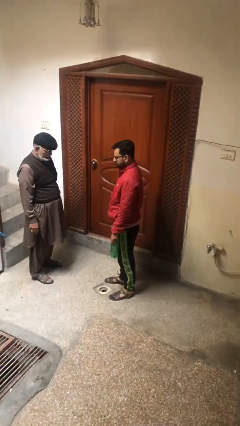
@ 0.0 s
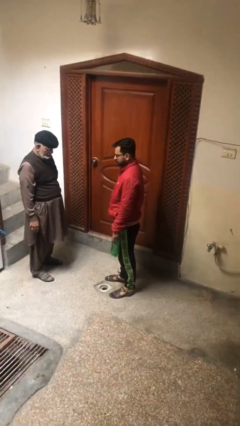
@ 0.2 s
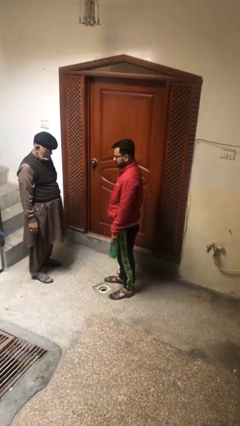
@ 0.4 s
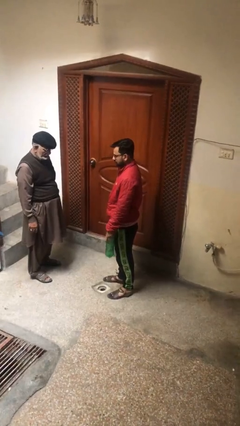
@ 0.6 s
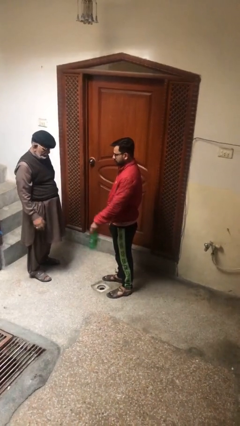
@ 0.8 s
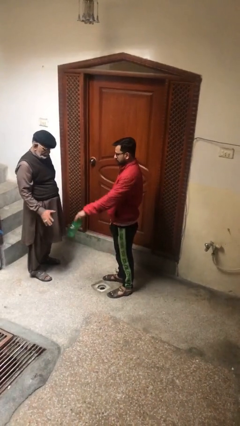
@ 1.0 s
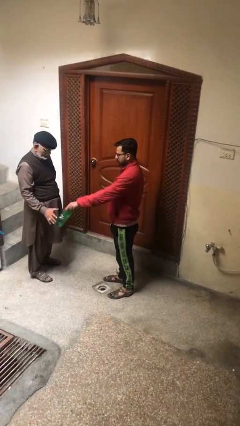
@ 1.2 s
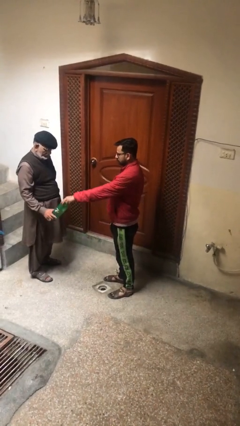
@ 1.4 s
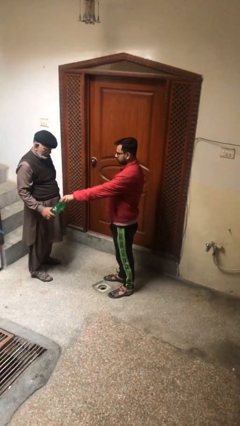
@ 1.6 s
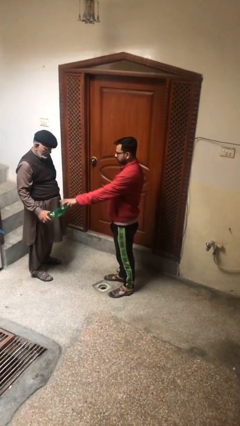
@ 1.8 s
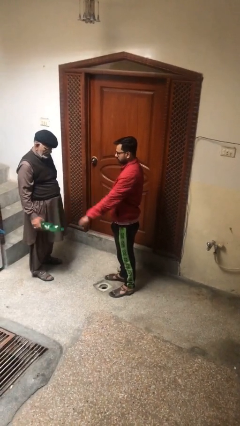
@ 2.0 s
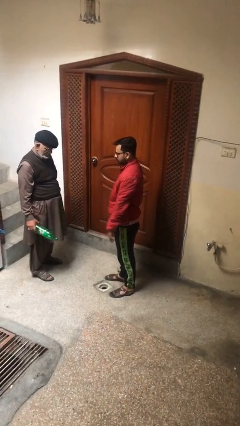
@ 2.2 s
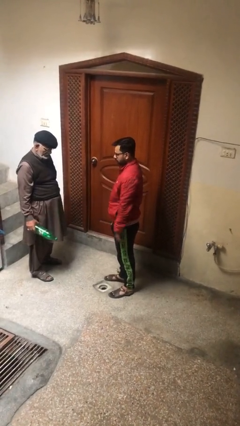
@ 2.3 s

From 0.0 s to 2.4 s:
person transfers object to person

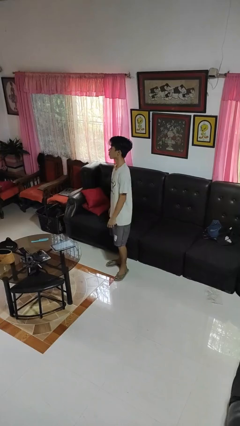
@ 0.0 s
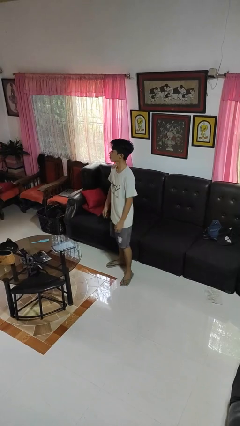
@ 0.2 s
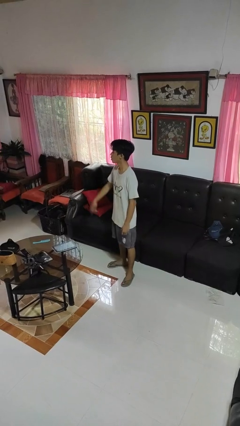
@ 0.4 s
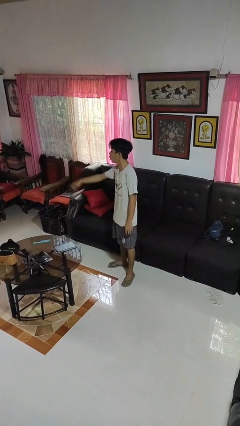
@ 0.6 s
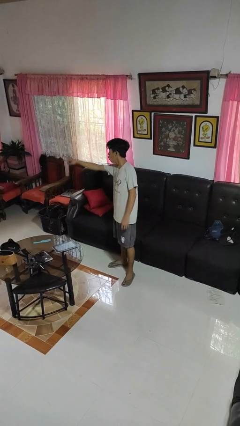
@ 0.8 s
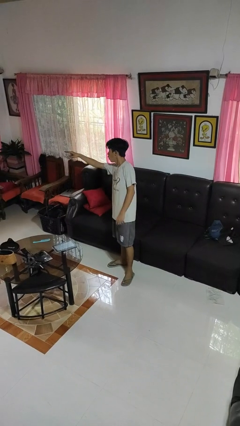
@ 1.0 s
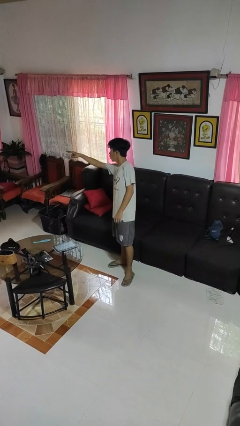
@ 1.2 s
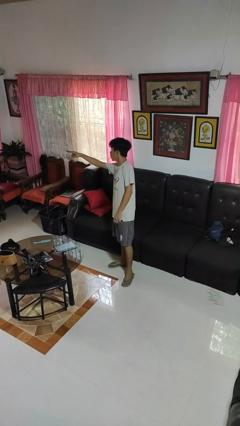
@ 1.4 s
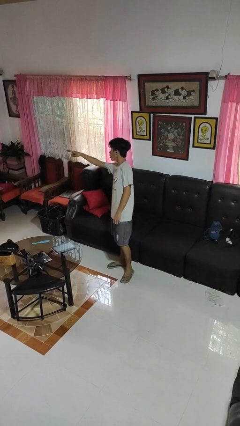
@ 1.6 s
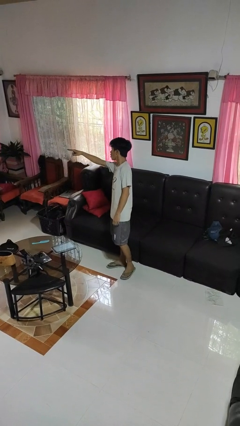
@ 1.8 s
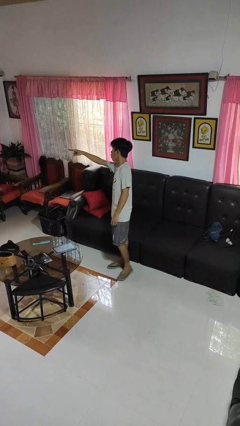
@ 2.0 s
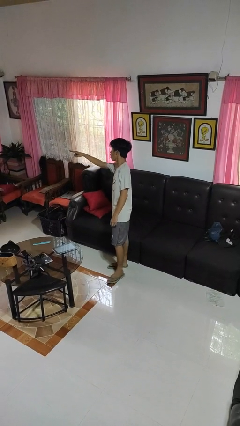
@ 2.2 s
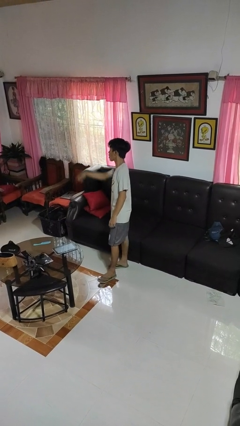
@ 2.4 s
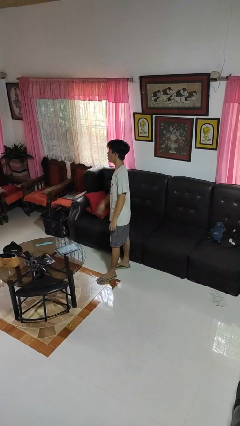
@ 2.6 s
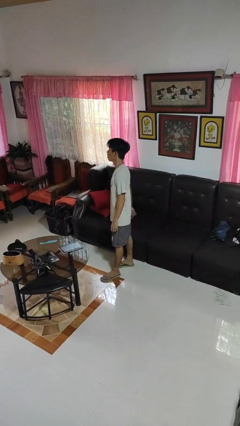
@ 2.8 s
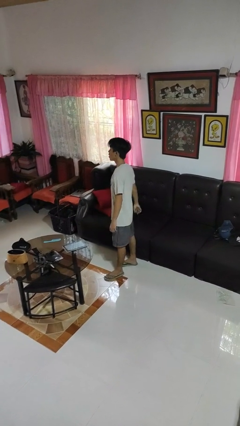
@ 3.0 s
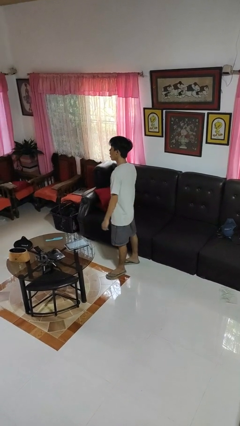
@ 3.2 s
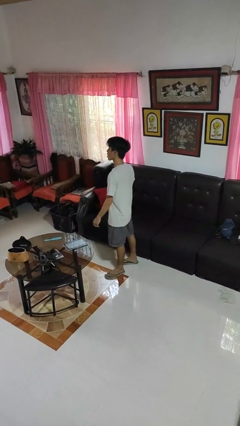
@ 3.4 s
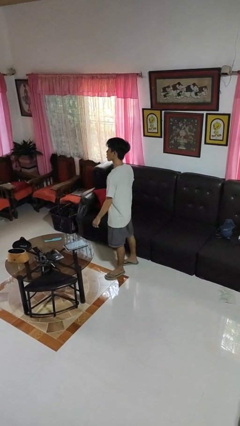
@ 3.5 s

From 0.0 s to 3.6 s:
person points at person

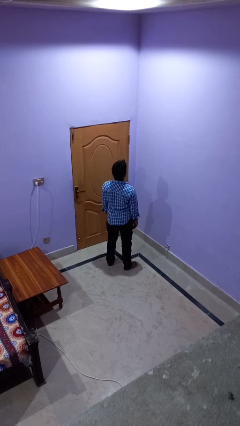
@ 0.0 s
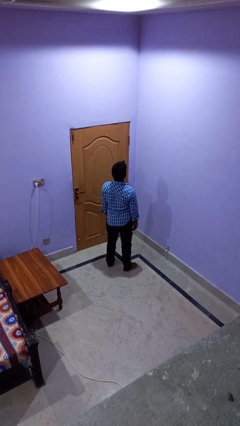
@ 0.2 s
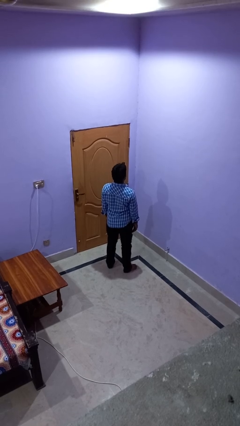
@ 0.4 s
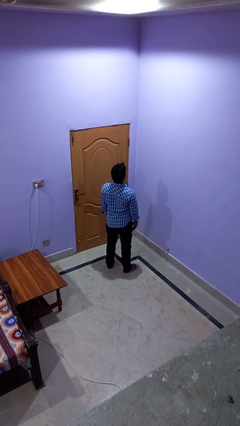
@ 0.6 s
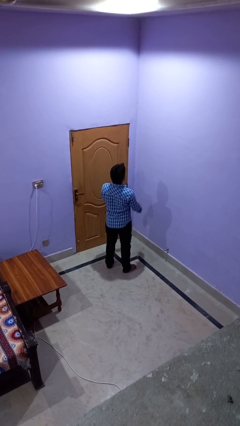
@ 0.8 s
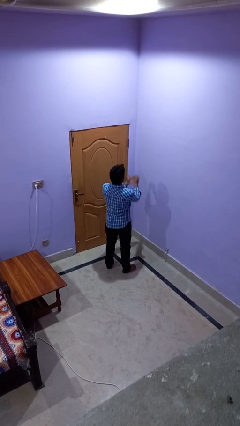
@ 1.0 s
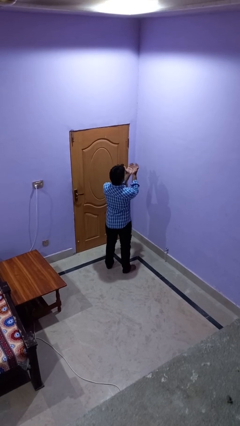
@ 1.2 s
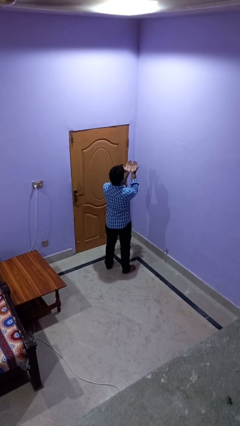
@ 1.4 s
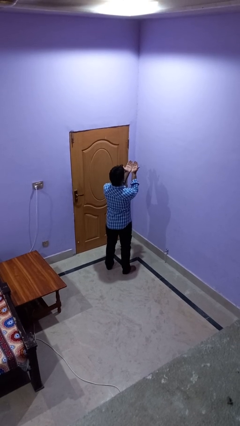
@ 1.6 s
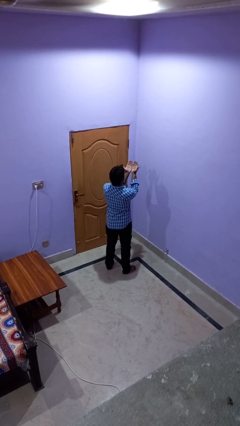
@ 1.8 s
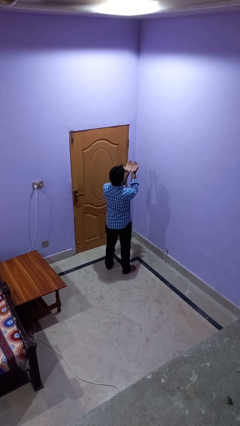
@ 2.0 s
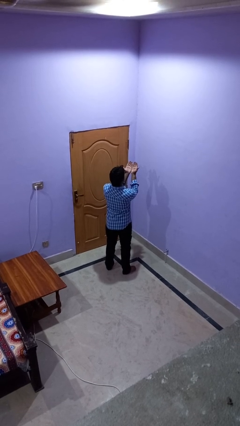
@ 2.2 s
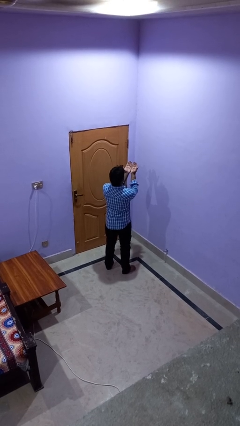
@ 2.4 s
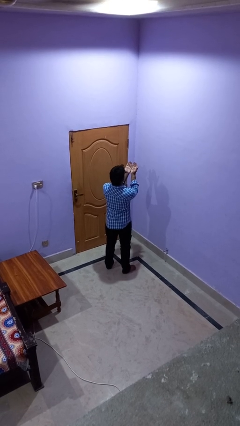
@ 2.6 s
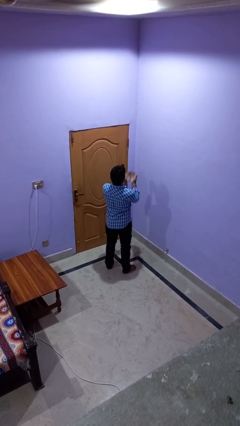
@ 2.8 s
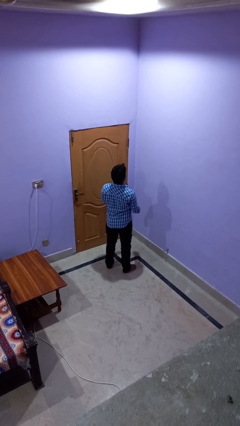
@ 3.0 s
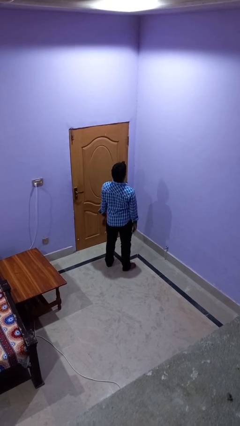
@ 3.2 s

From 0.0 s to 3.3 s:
person prays

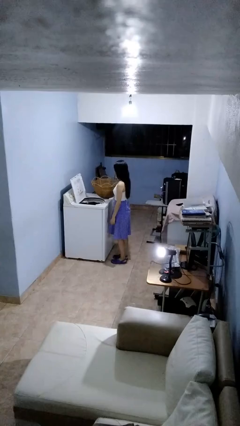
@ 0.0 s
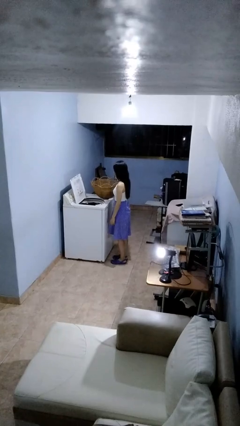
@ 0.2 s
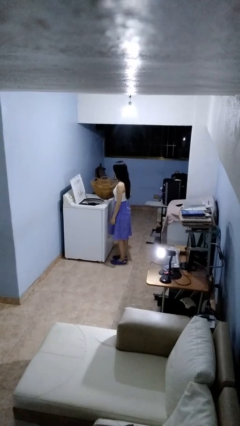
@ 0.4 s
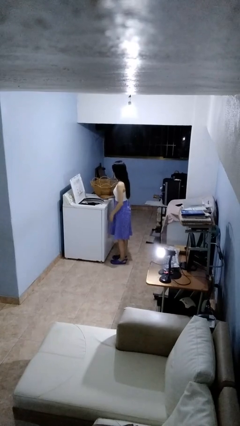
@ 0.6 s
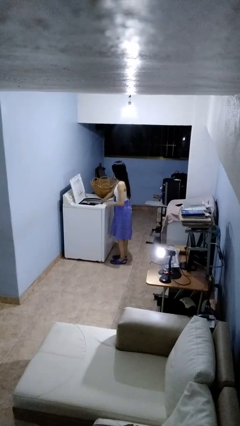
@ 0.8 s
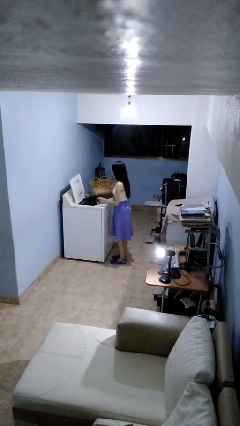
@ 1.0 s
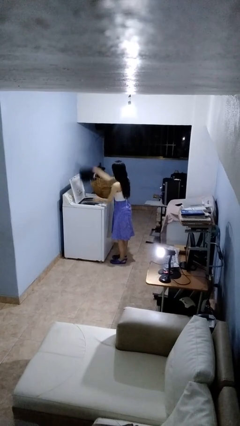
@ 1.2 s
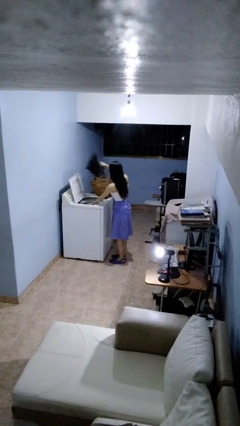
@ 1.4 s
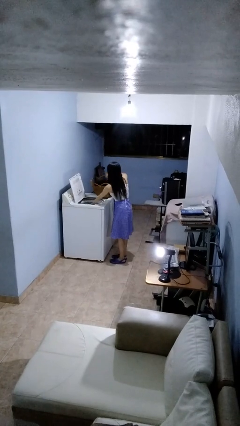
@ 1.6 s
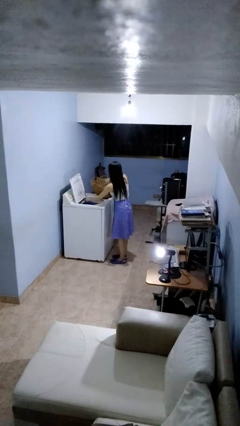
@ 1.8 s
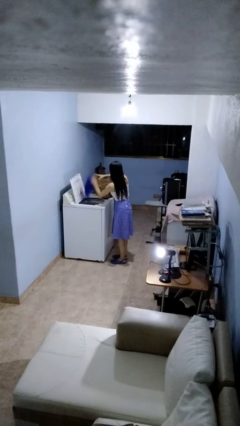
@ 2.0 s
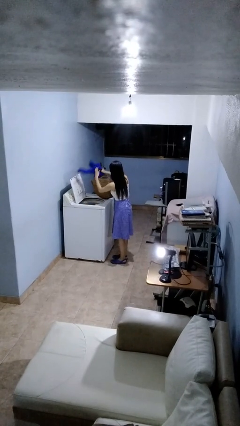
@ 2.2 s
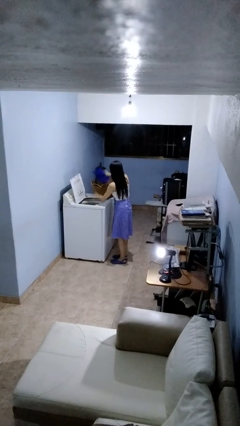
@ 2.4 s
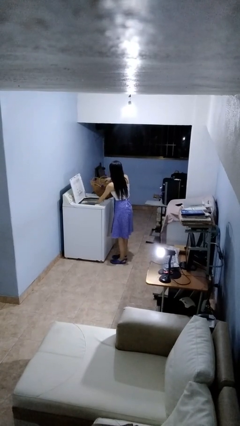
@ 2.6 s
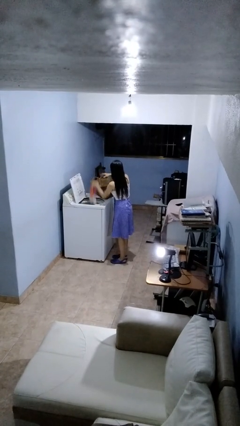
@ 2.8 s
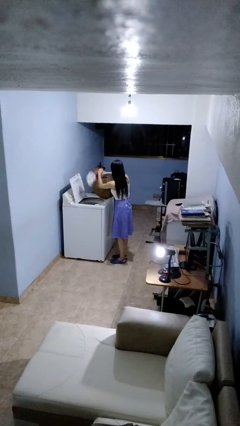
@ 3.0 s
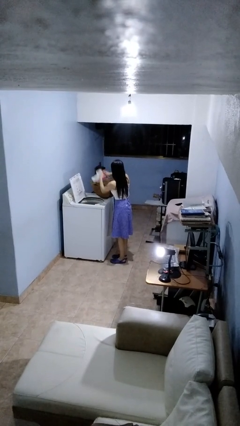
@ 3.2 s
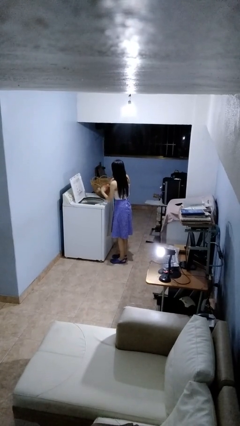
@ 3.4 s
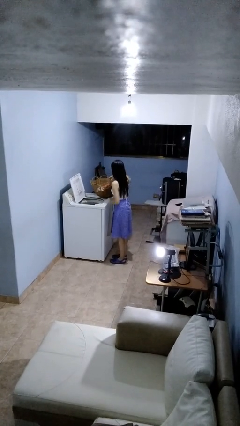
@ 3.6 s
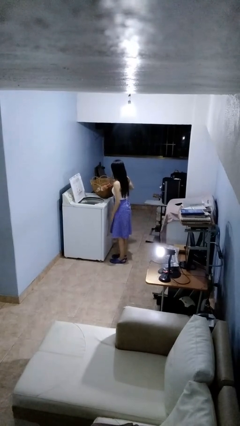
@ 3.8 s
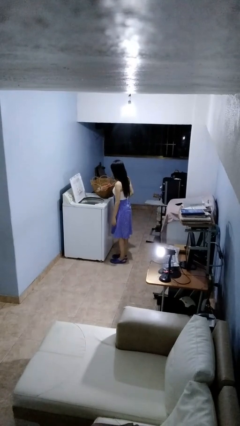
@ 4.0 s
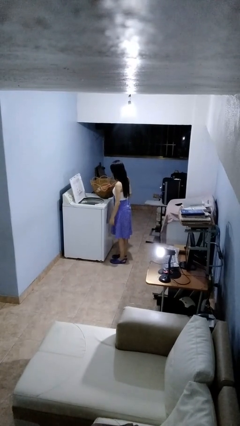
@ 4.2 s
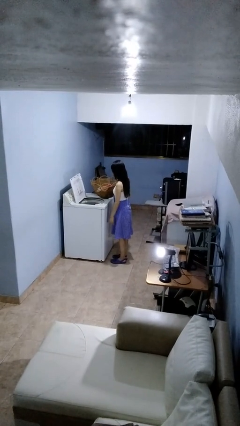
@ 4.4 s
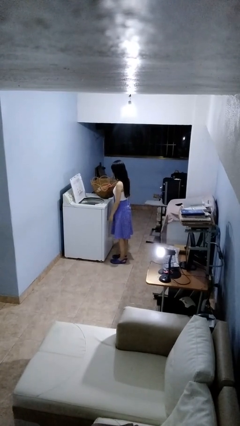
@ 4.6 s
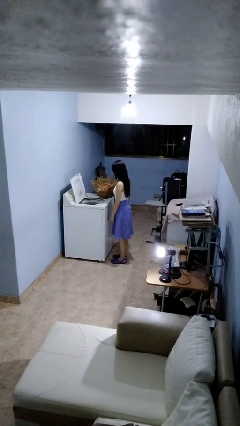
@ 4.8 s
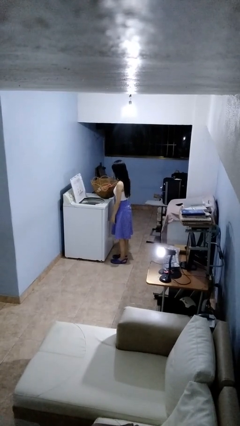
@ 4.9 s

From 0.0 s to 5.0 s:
person unloads clotheswasher

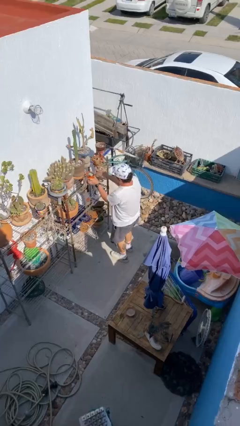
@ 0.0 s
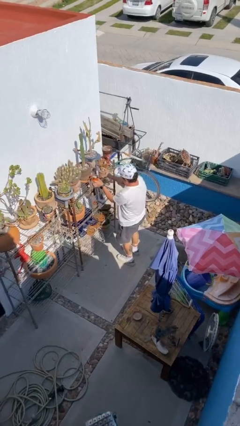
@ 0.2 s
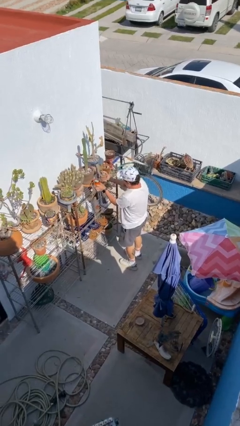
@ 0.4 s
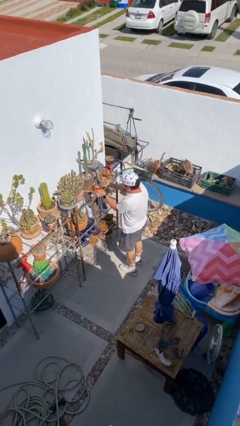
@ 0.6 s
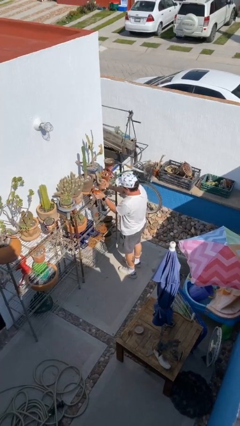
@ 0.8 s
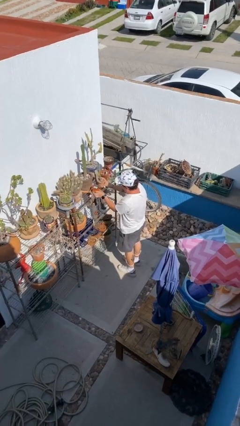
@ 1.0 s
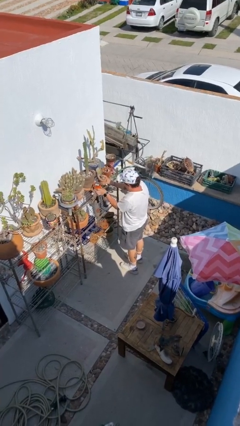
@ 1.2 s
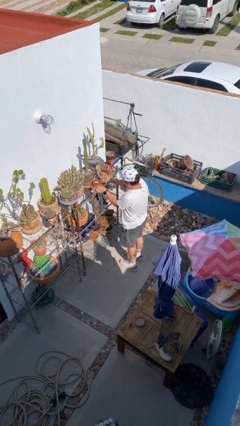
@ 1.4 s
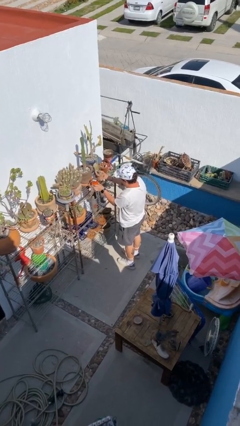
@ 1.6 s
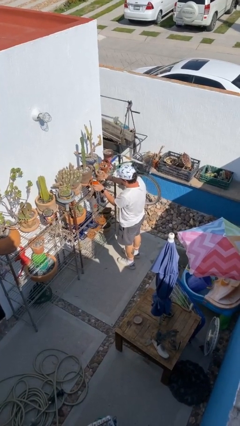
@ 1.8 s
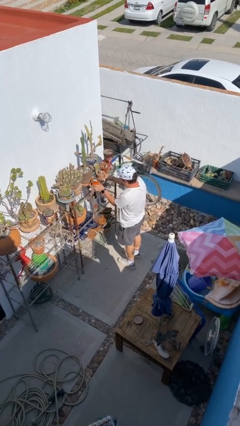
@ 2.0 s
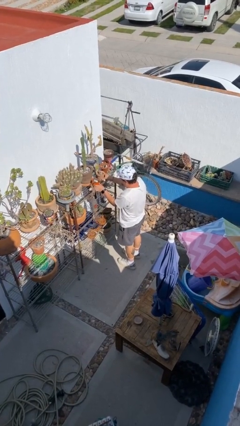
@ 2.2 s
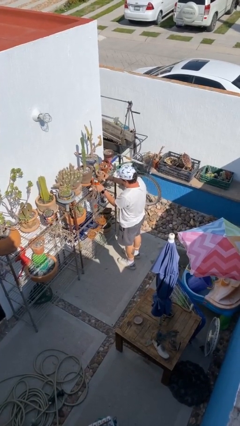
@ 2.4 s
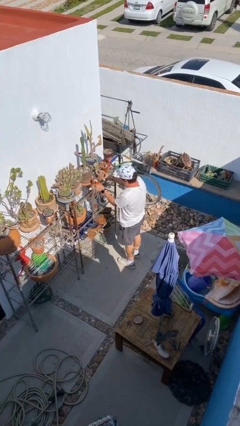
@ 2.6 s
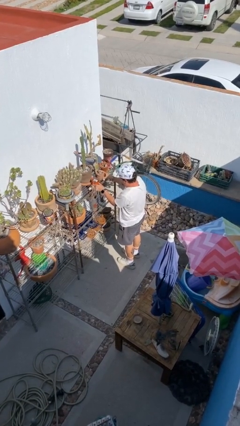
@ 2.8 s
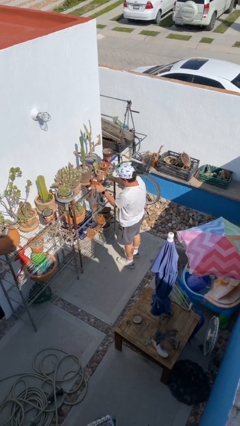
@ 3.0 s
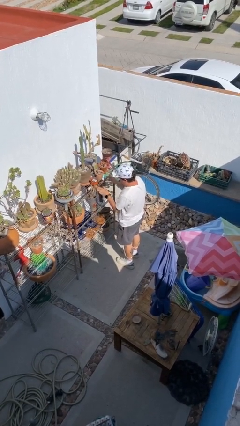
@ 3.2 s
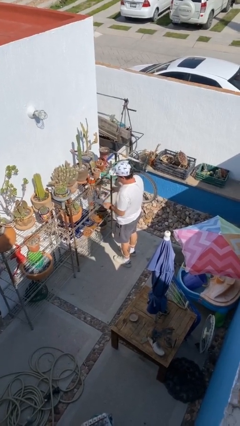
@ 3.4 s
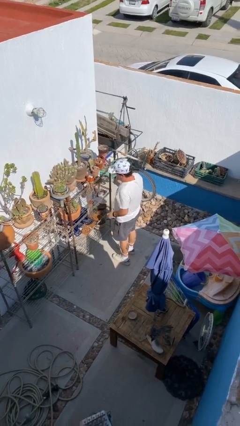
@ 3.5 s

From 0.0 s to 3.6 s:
person puts down object on shelf

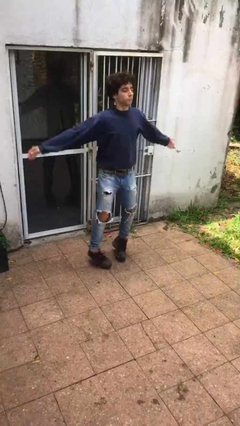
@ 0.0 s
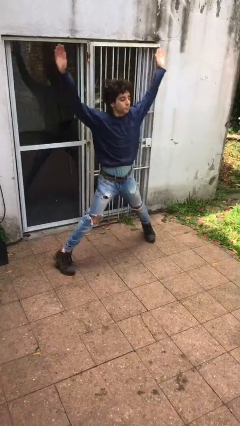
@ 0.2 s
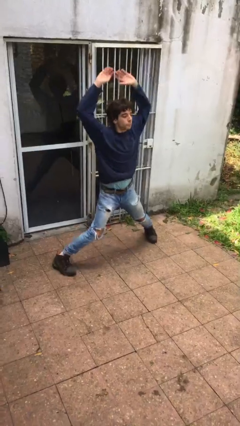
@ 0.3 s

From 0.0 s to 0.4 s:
person exercises with jumping jacks
